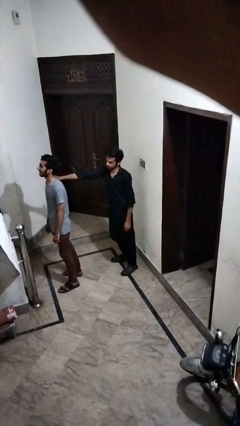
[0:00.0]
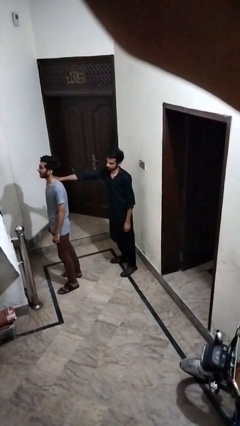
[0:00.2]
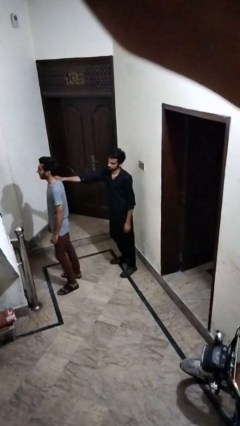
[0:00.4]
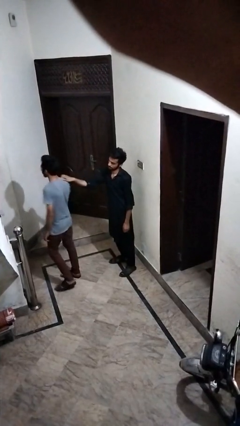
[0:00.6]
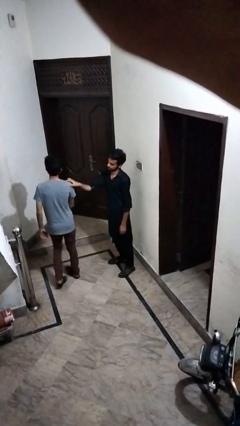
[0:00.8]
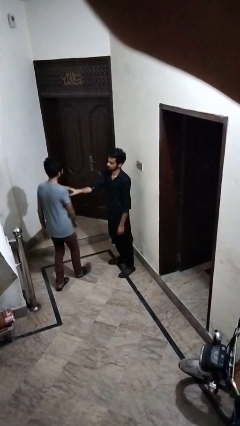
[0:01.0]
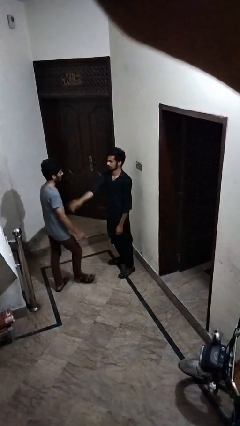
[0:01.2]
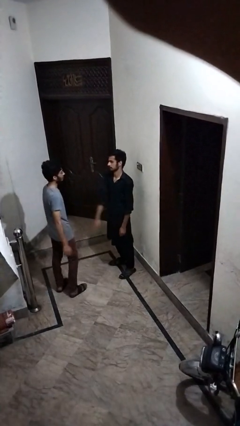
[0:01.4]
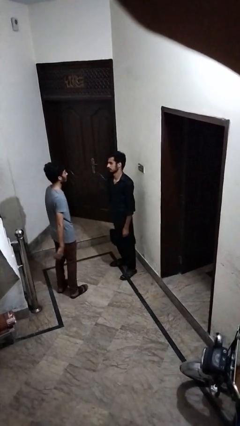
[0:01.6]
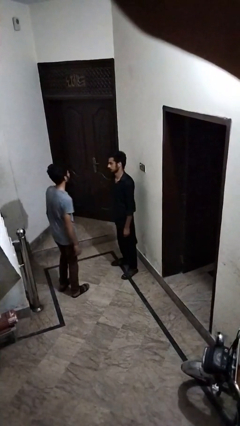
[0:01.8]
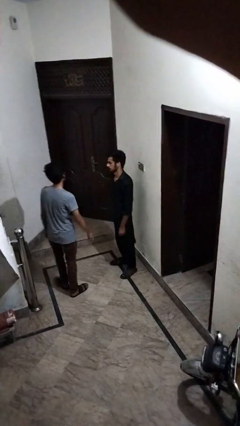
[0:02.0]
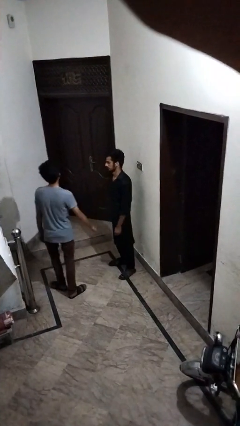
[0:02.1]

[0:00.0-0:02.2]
person spins person around

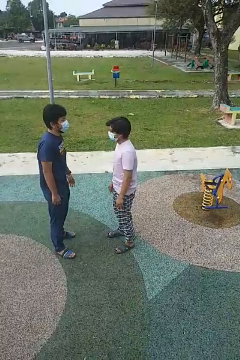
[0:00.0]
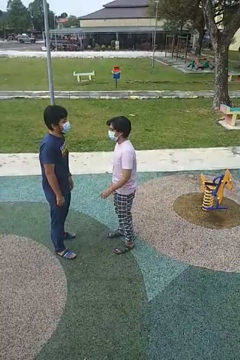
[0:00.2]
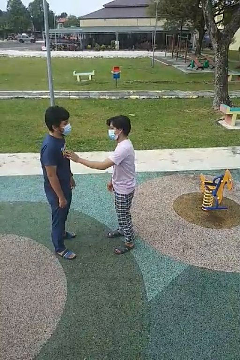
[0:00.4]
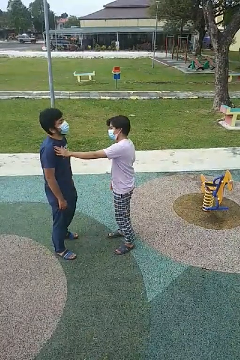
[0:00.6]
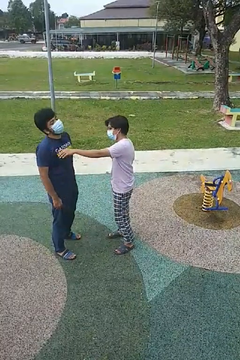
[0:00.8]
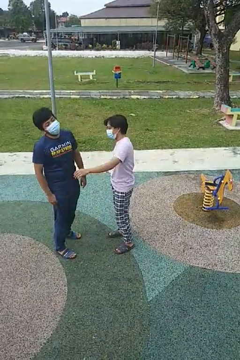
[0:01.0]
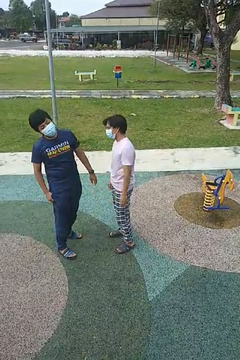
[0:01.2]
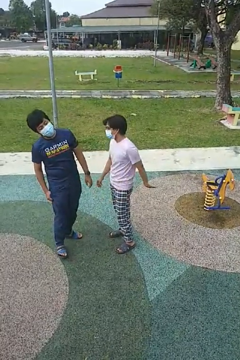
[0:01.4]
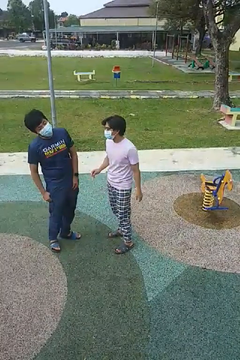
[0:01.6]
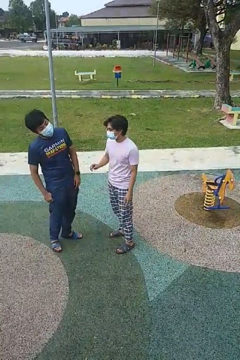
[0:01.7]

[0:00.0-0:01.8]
person shoves person

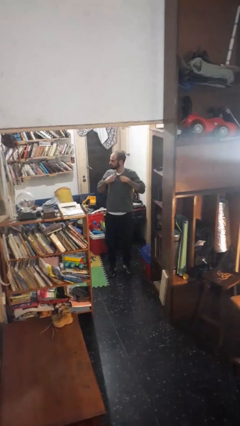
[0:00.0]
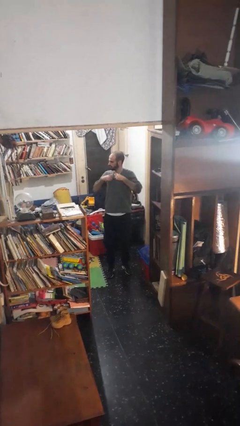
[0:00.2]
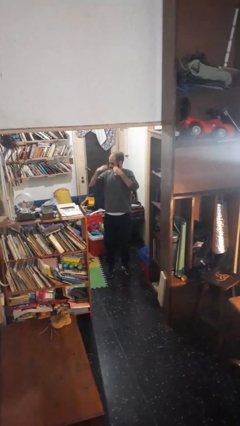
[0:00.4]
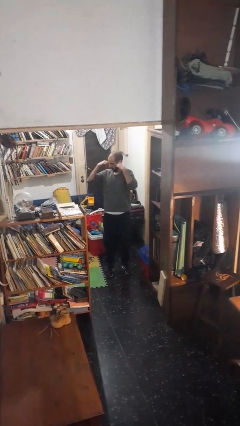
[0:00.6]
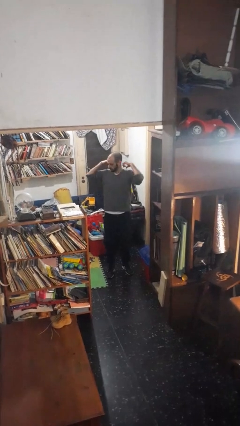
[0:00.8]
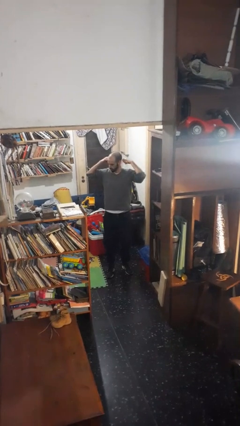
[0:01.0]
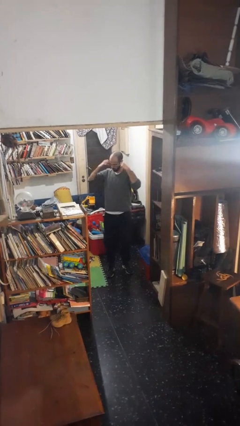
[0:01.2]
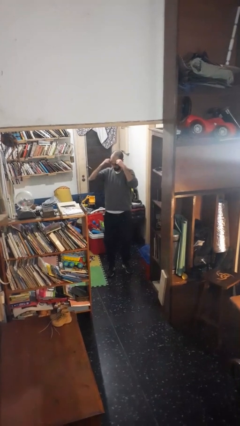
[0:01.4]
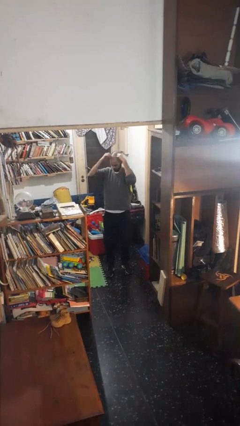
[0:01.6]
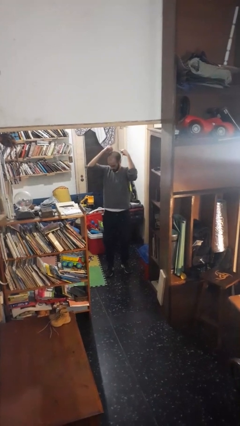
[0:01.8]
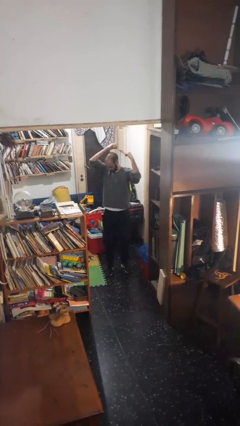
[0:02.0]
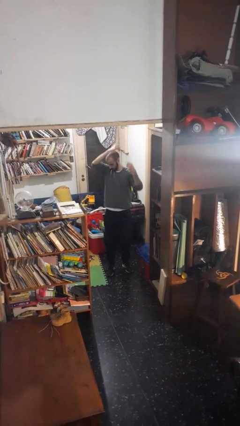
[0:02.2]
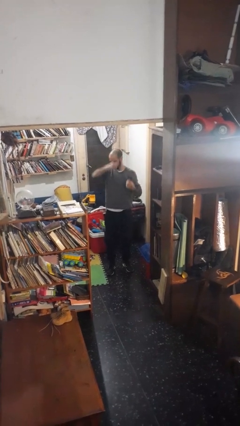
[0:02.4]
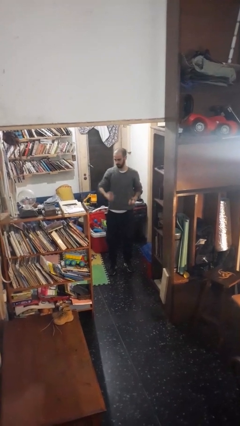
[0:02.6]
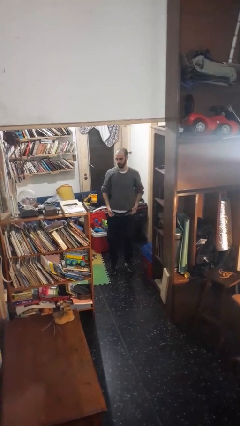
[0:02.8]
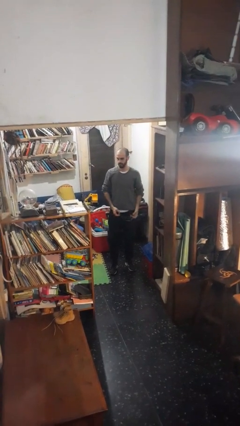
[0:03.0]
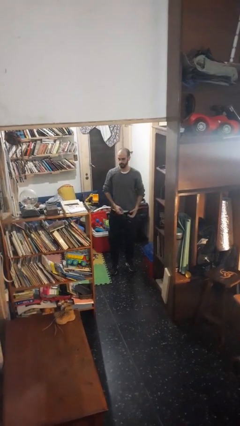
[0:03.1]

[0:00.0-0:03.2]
person takes off necklace

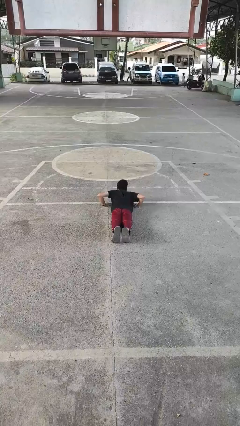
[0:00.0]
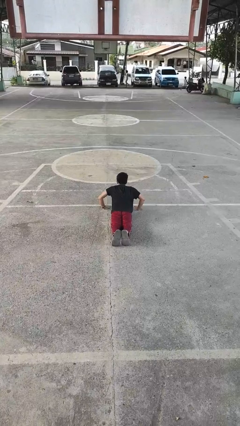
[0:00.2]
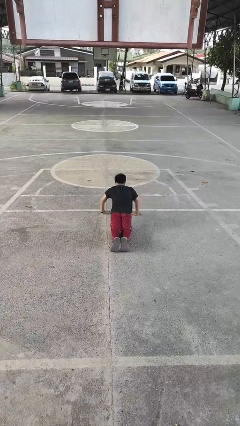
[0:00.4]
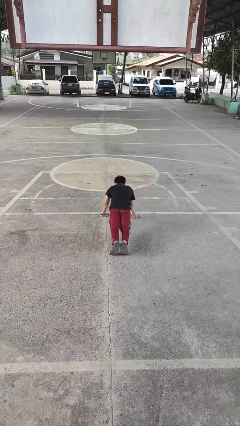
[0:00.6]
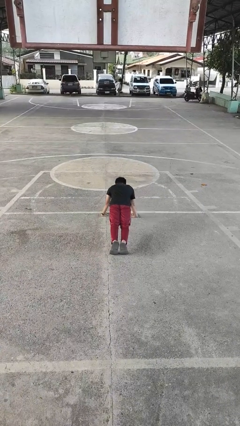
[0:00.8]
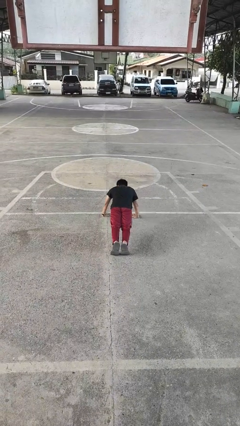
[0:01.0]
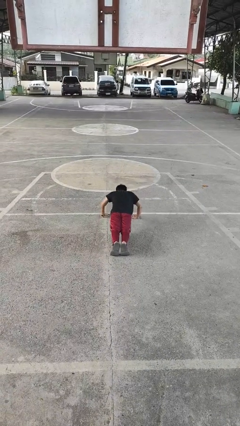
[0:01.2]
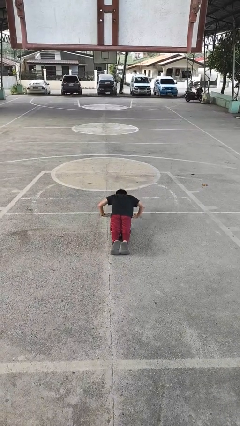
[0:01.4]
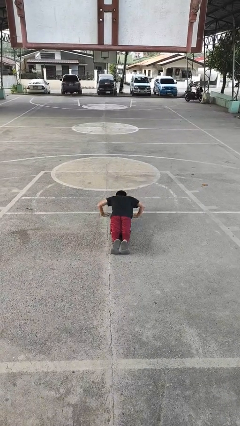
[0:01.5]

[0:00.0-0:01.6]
person exercises with pushup

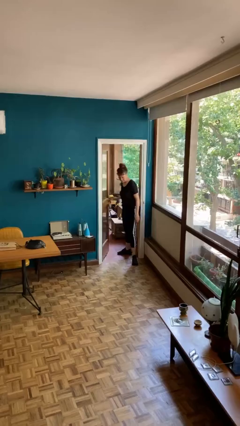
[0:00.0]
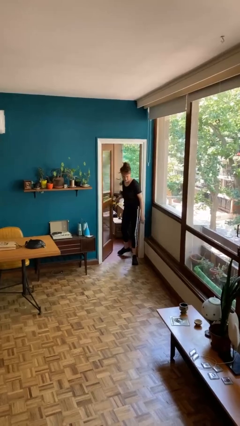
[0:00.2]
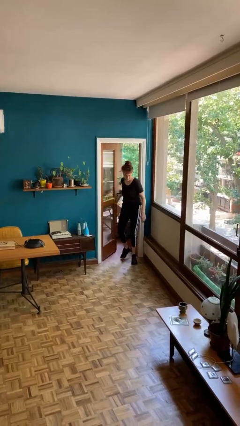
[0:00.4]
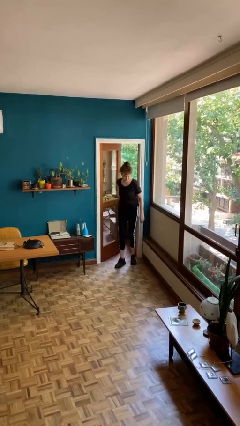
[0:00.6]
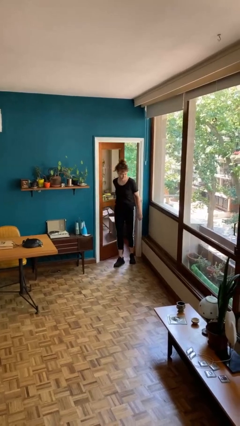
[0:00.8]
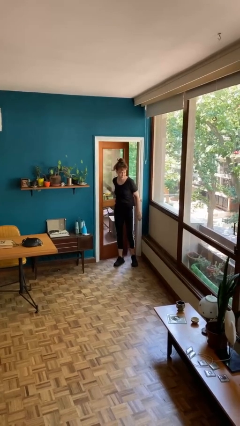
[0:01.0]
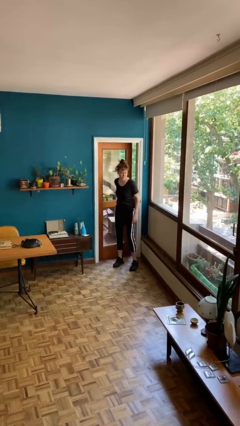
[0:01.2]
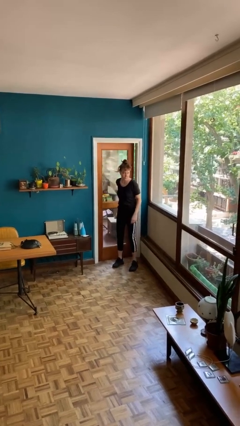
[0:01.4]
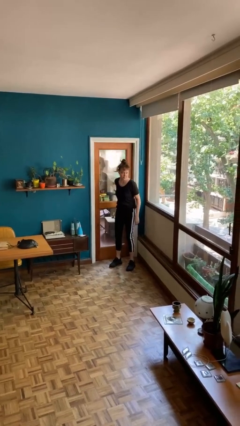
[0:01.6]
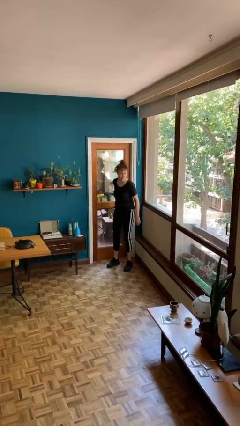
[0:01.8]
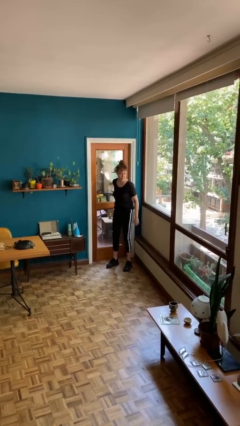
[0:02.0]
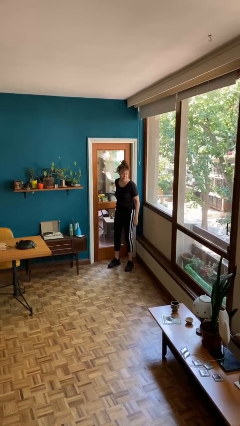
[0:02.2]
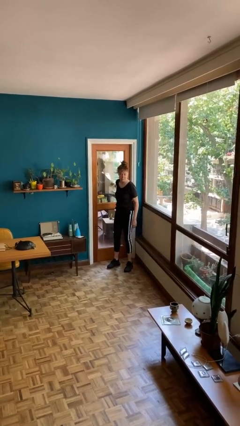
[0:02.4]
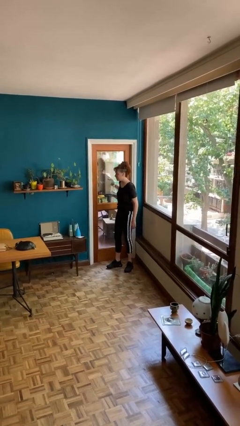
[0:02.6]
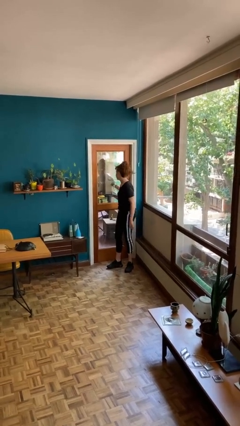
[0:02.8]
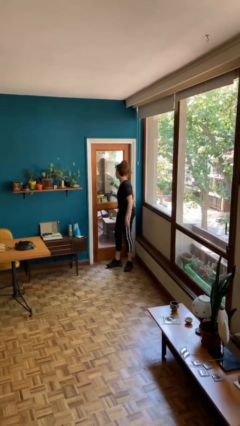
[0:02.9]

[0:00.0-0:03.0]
person closes facility door

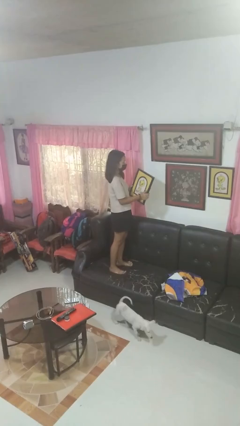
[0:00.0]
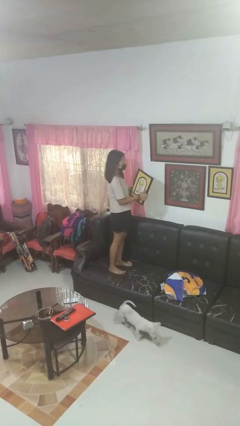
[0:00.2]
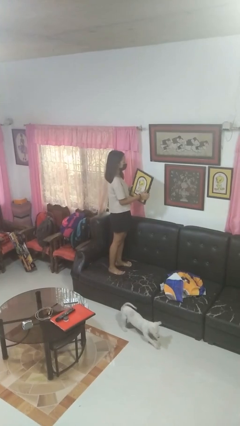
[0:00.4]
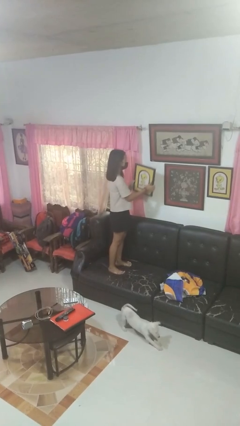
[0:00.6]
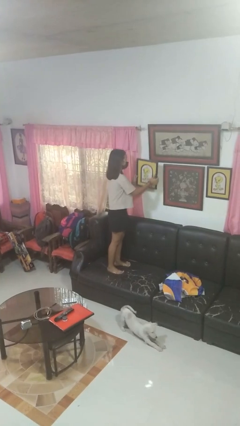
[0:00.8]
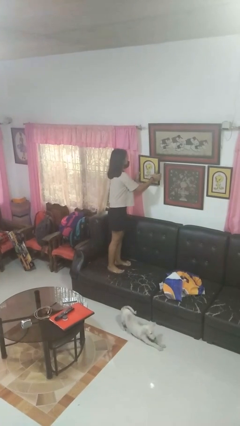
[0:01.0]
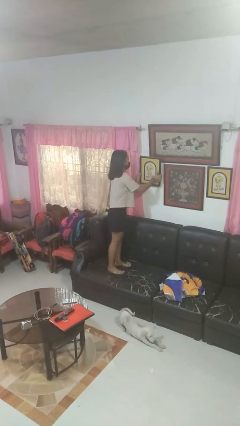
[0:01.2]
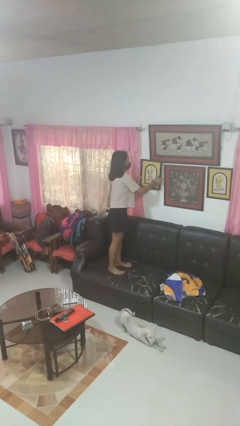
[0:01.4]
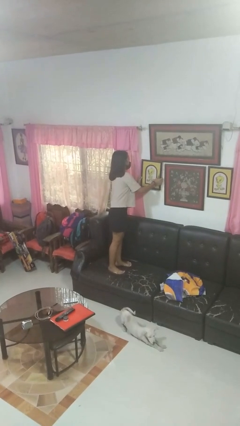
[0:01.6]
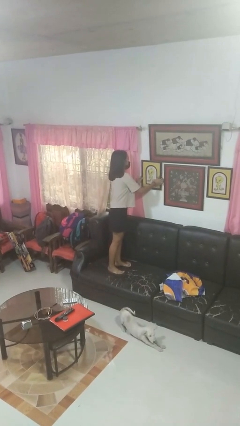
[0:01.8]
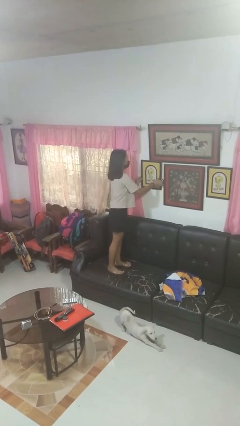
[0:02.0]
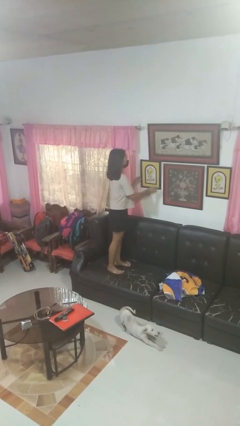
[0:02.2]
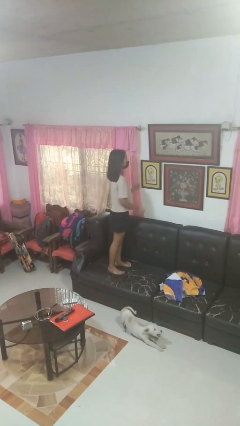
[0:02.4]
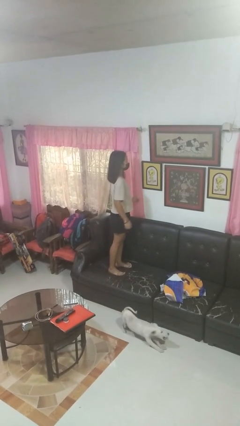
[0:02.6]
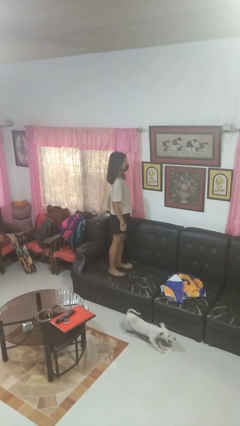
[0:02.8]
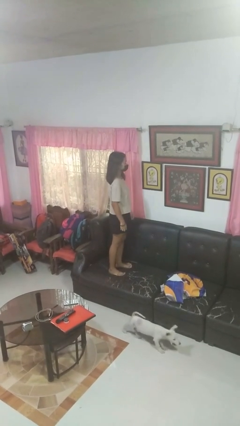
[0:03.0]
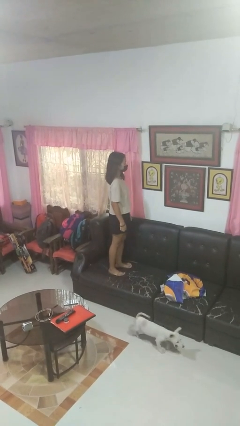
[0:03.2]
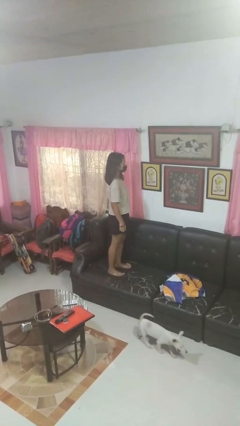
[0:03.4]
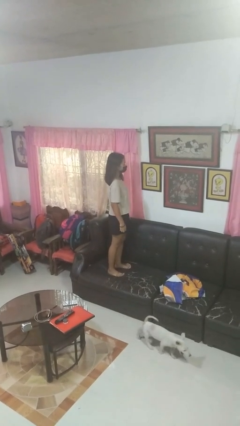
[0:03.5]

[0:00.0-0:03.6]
person puts up picture frame

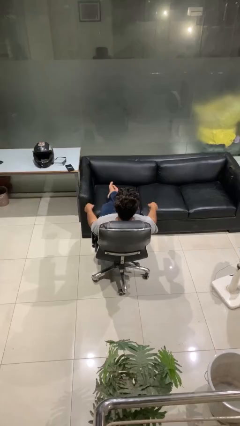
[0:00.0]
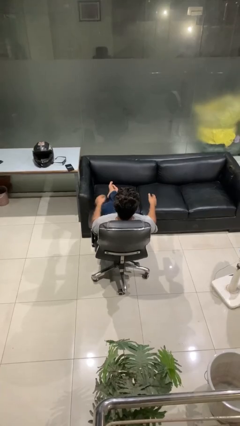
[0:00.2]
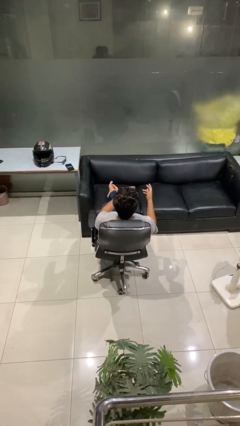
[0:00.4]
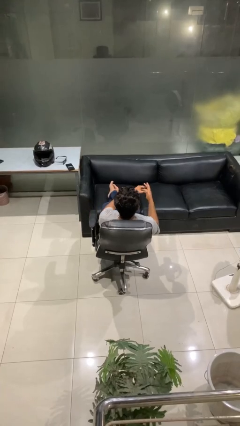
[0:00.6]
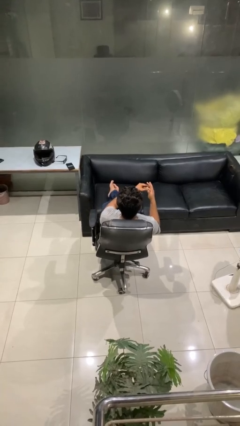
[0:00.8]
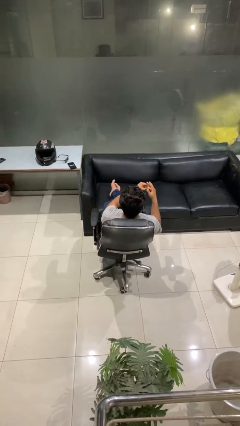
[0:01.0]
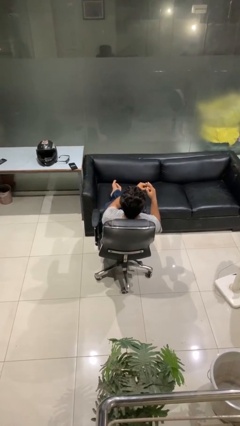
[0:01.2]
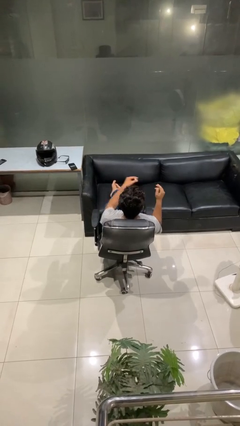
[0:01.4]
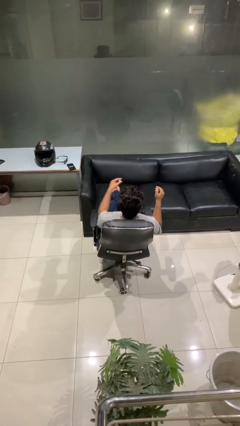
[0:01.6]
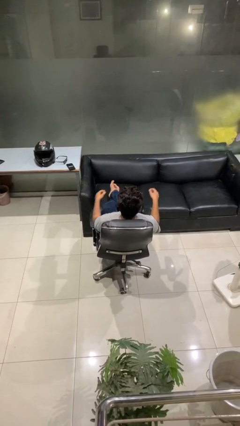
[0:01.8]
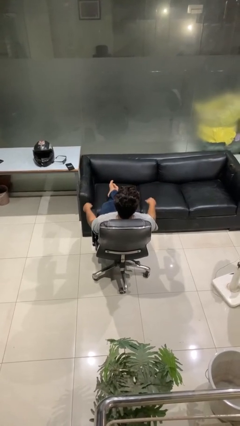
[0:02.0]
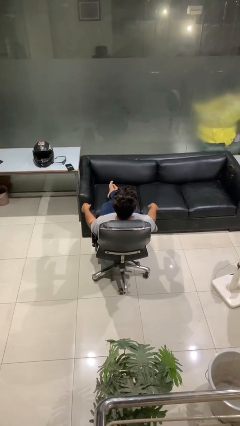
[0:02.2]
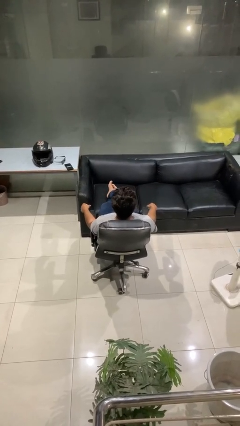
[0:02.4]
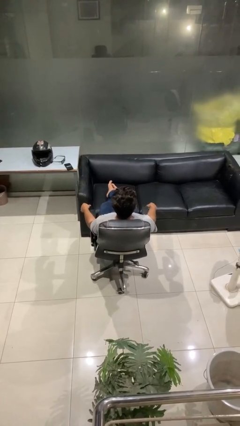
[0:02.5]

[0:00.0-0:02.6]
person takes off ring
